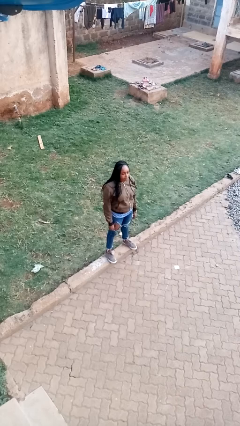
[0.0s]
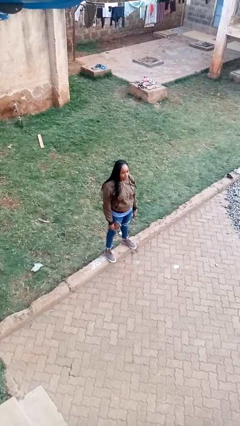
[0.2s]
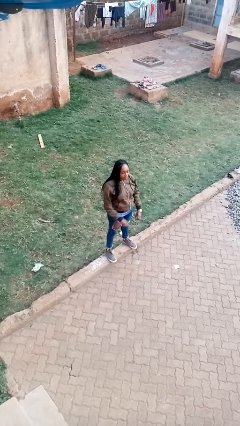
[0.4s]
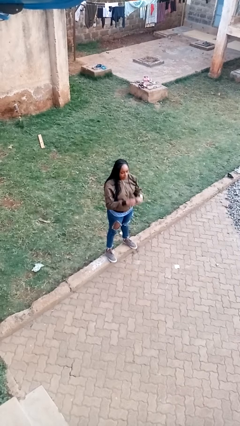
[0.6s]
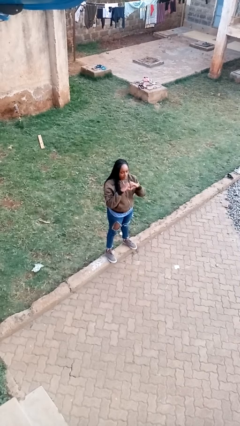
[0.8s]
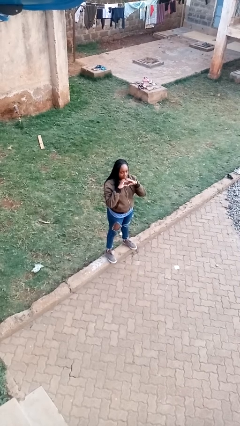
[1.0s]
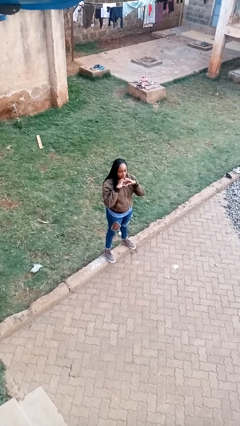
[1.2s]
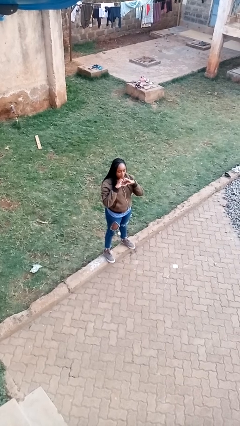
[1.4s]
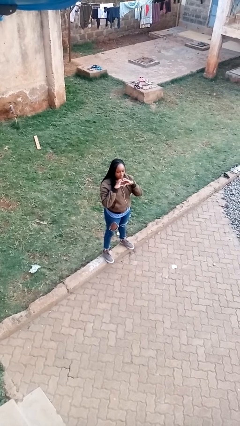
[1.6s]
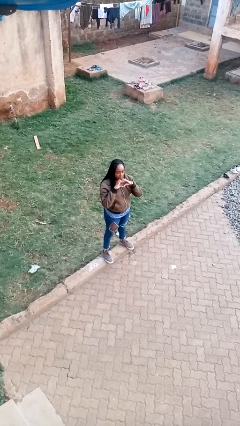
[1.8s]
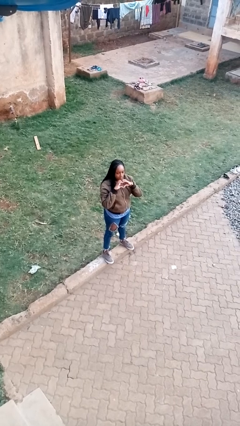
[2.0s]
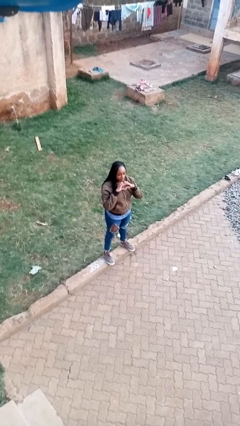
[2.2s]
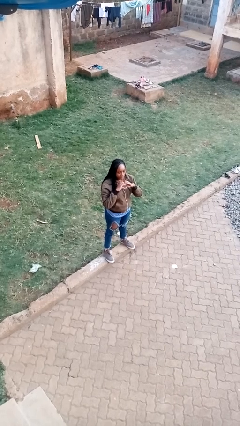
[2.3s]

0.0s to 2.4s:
person gestures heart

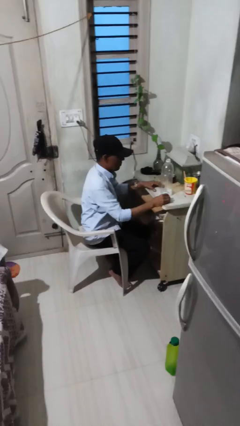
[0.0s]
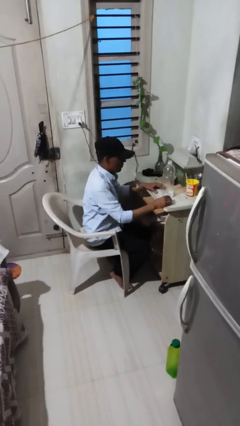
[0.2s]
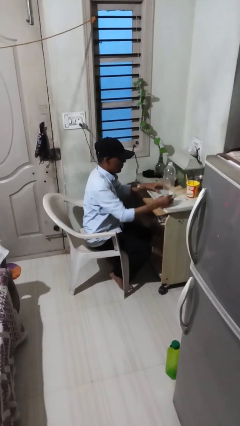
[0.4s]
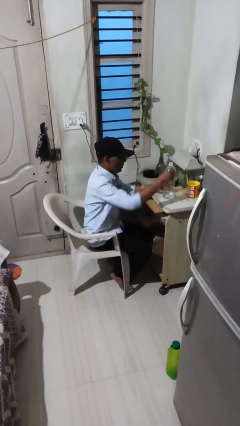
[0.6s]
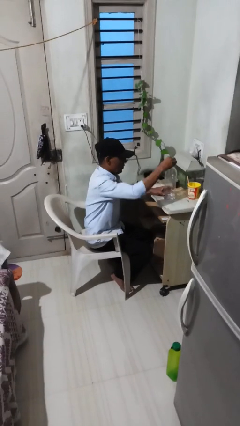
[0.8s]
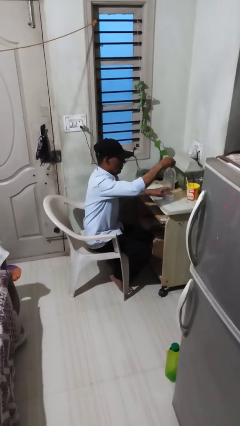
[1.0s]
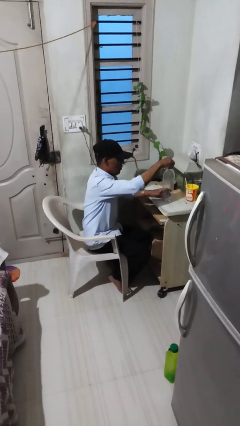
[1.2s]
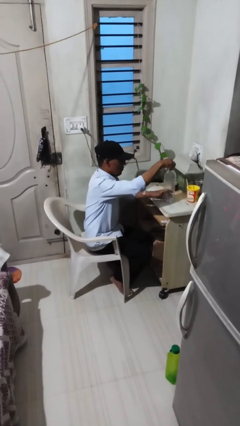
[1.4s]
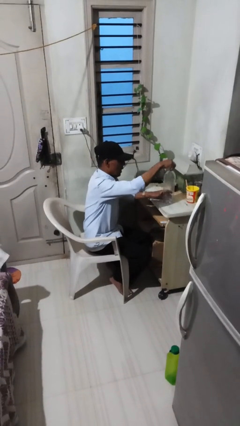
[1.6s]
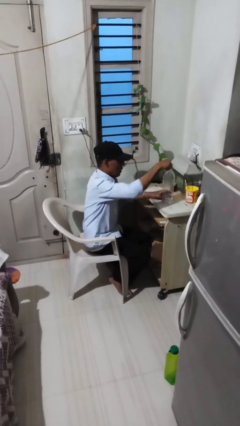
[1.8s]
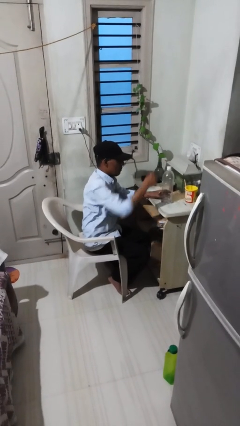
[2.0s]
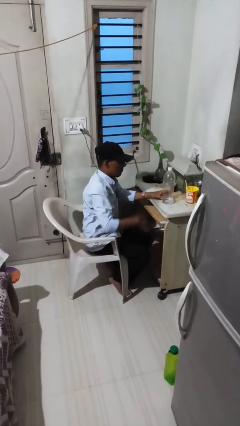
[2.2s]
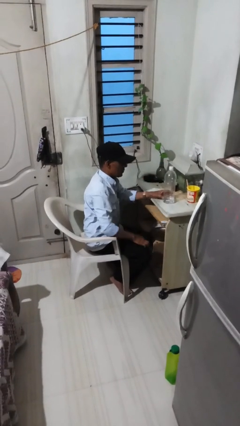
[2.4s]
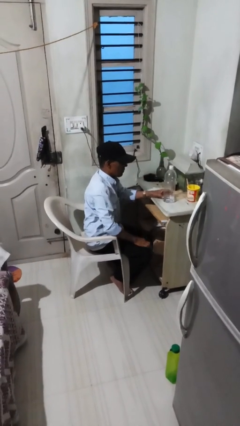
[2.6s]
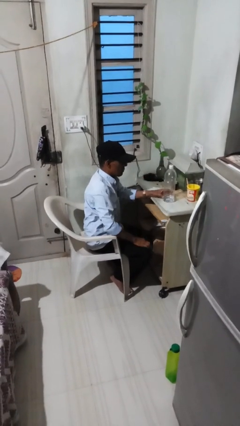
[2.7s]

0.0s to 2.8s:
person screws lid to bottle

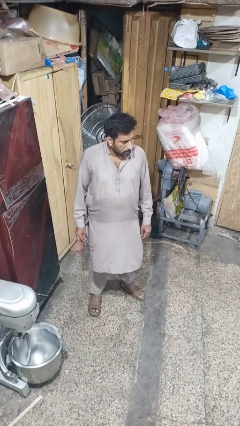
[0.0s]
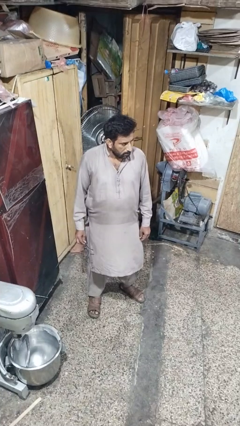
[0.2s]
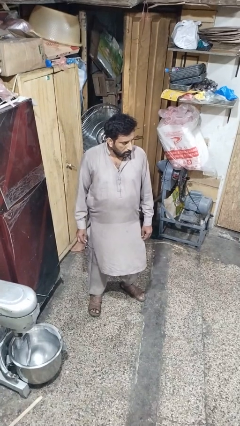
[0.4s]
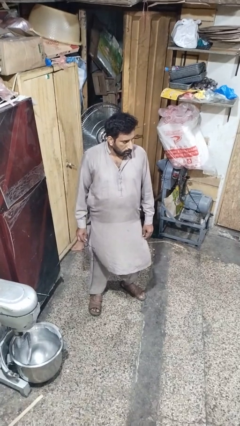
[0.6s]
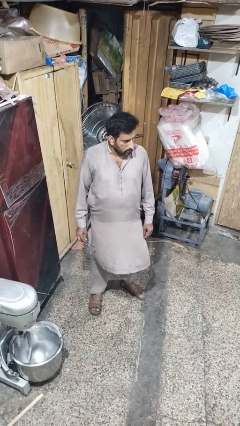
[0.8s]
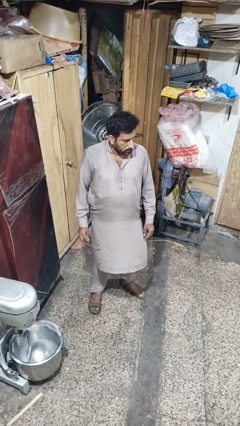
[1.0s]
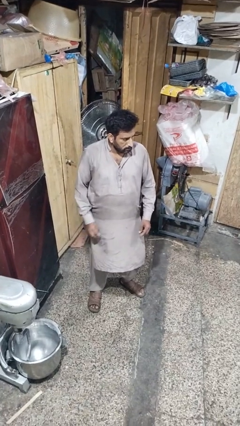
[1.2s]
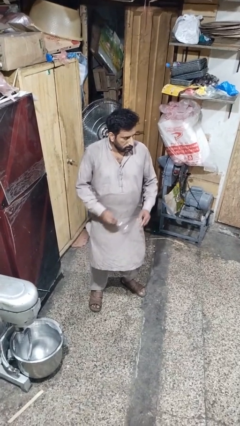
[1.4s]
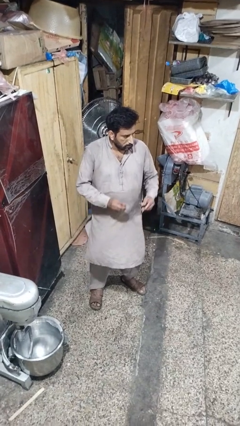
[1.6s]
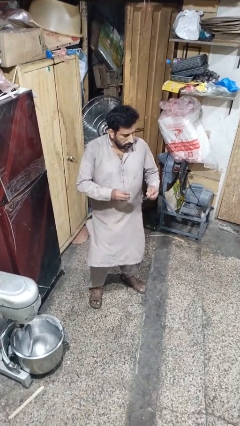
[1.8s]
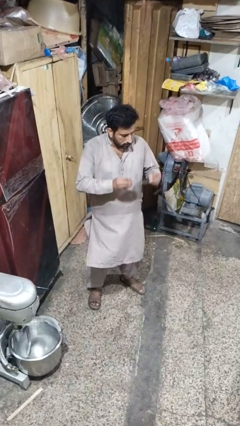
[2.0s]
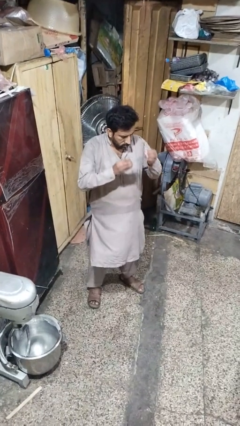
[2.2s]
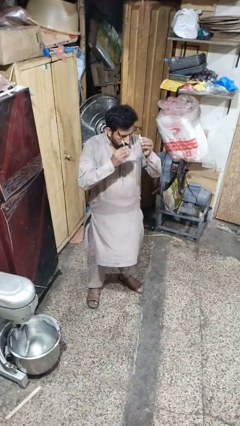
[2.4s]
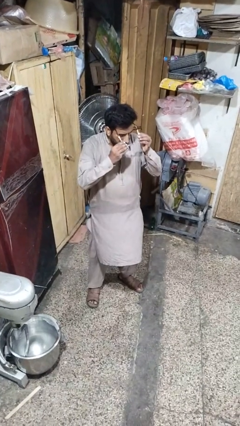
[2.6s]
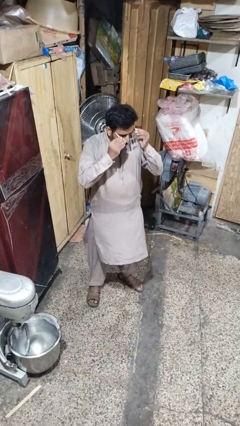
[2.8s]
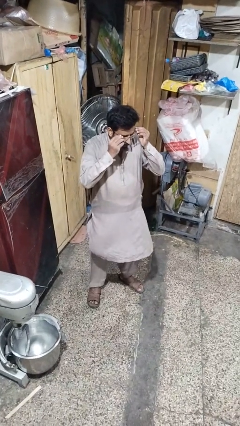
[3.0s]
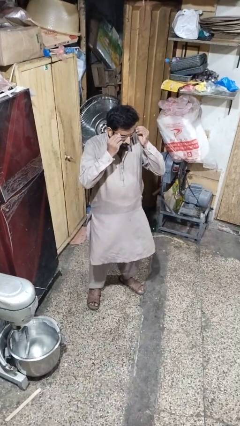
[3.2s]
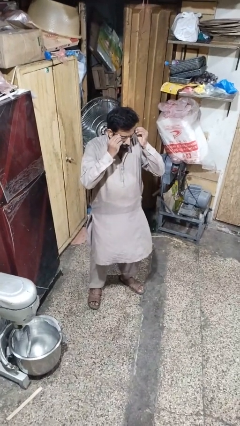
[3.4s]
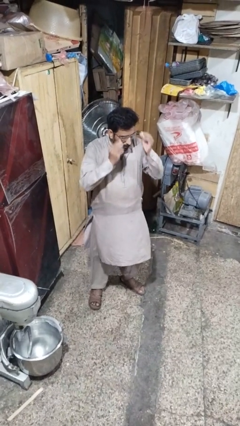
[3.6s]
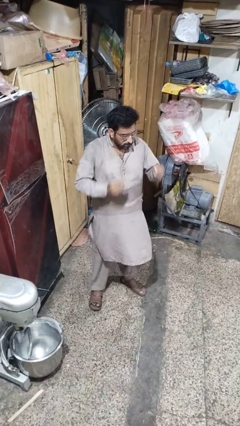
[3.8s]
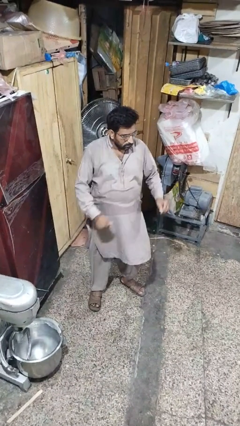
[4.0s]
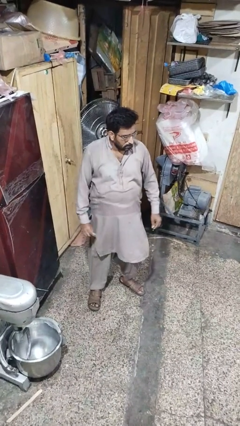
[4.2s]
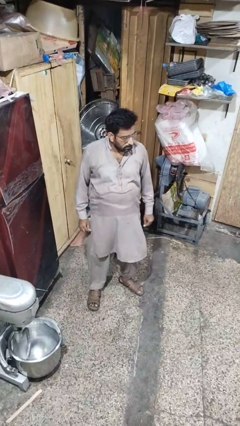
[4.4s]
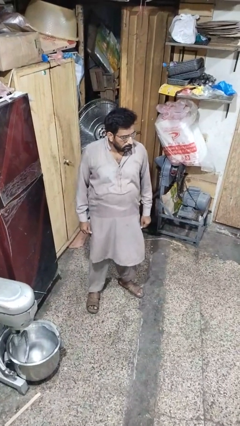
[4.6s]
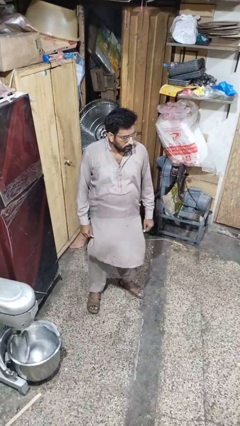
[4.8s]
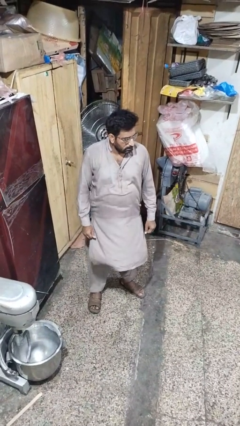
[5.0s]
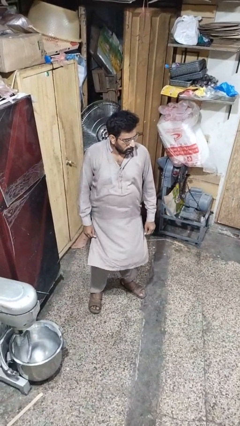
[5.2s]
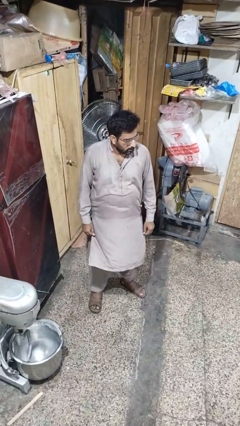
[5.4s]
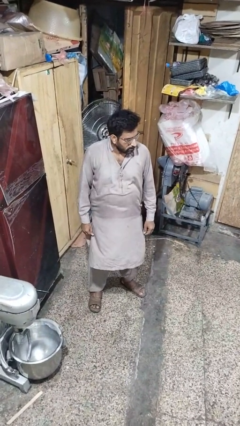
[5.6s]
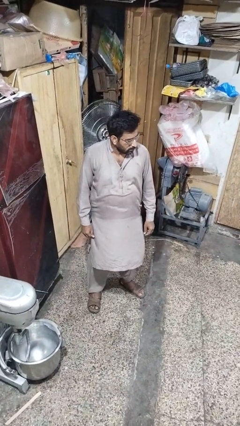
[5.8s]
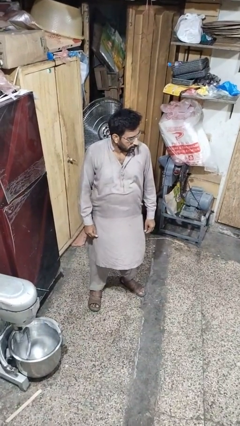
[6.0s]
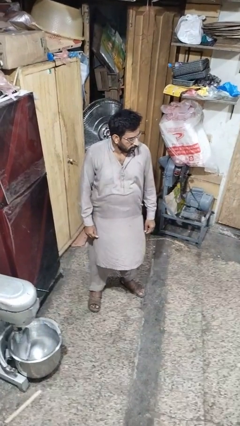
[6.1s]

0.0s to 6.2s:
person puts on glasses

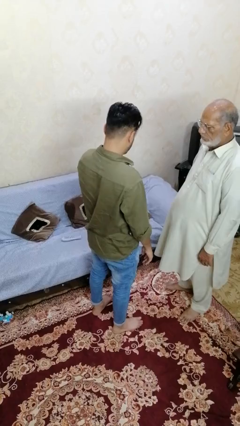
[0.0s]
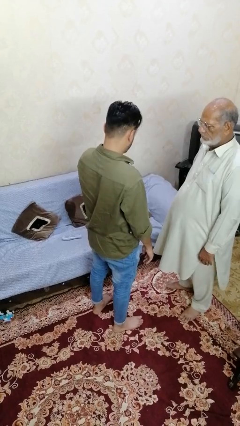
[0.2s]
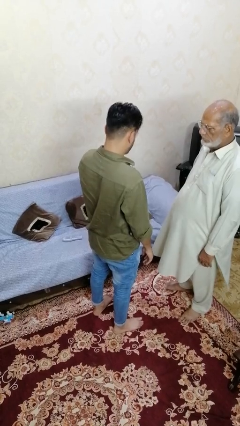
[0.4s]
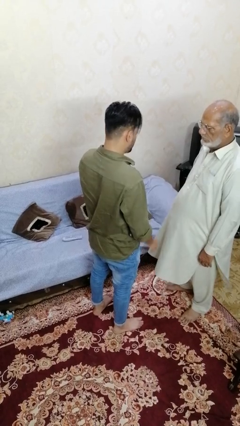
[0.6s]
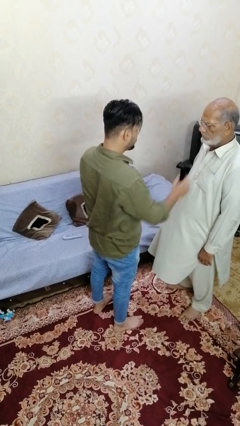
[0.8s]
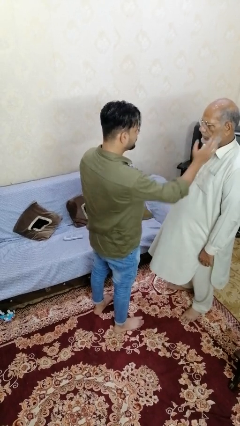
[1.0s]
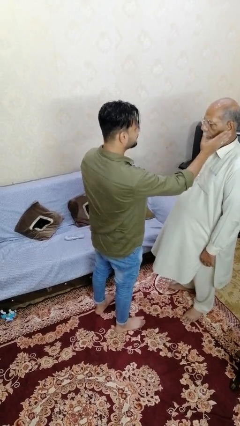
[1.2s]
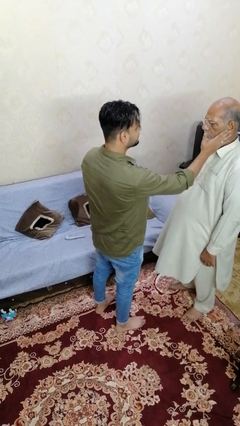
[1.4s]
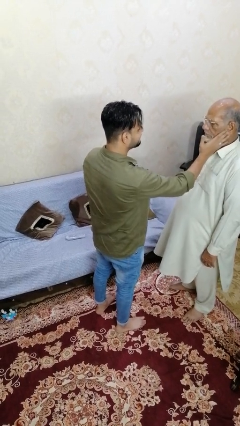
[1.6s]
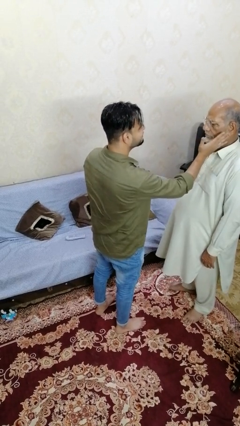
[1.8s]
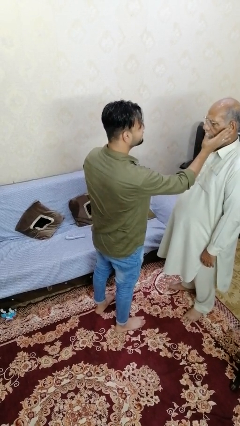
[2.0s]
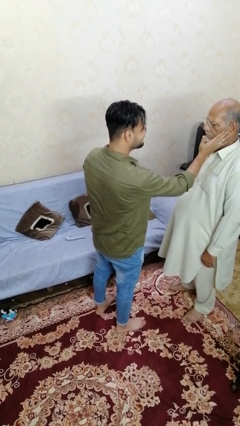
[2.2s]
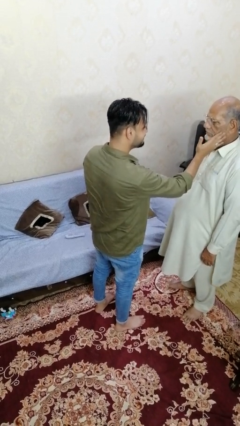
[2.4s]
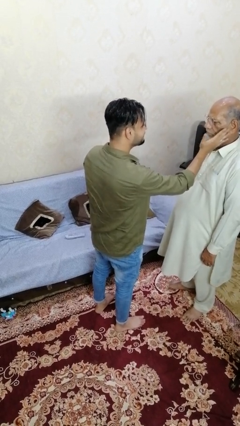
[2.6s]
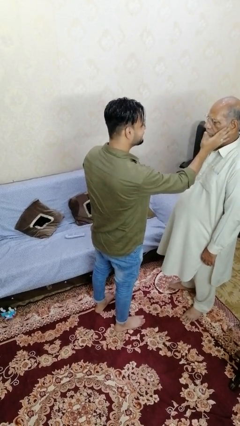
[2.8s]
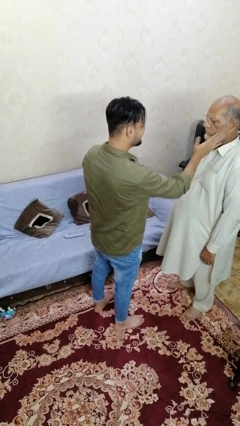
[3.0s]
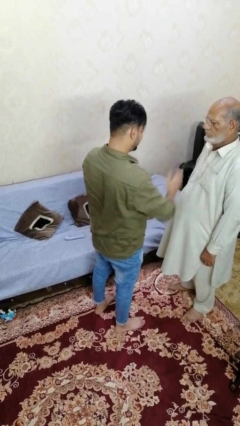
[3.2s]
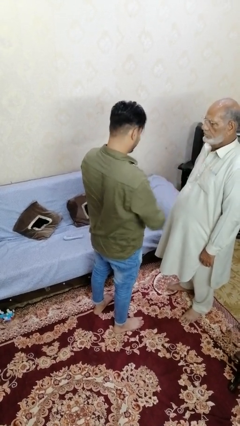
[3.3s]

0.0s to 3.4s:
person touches face of person

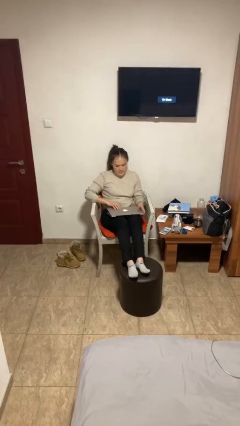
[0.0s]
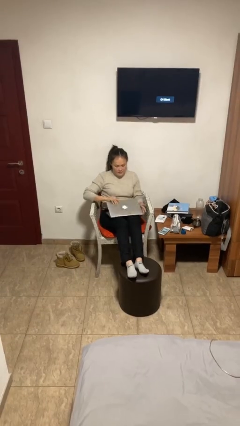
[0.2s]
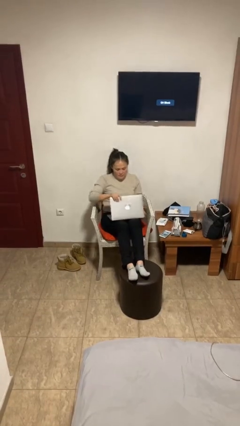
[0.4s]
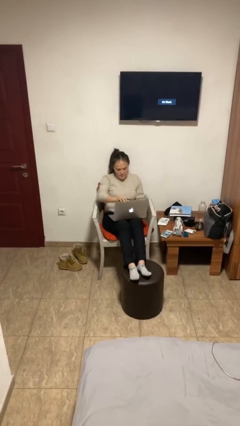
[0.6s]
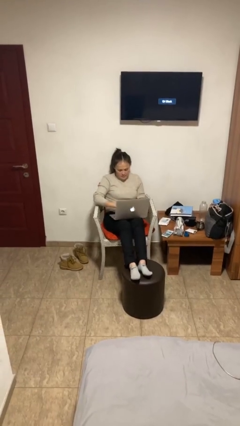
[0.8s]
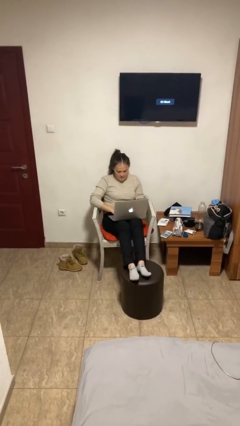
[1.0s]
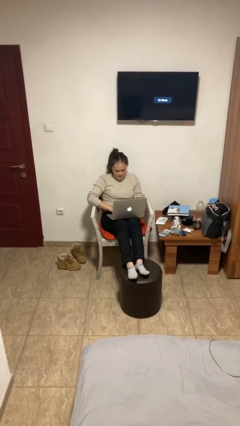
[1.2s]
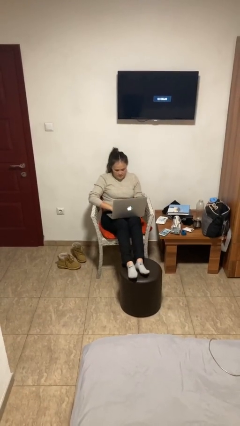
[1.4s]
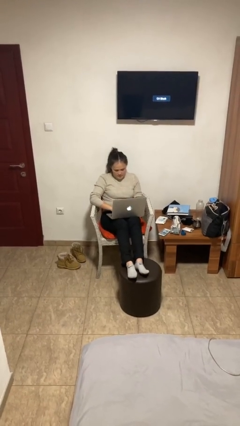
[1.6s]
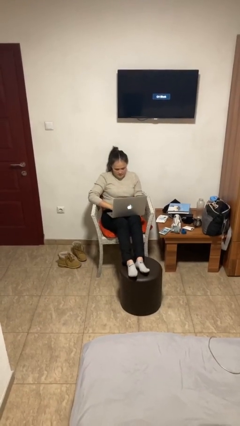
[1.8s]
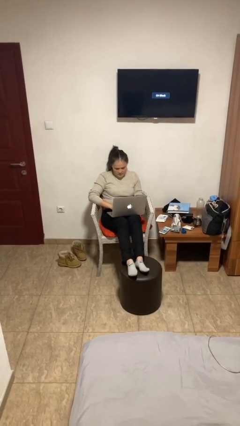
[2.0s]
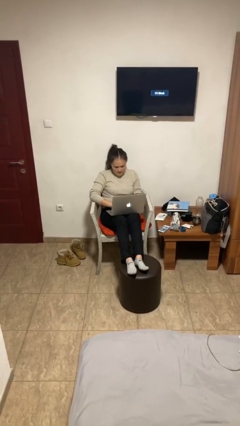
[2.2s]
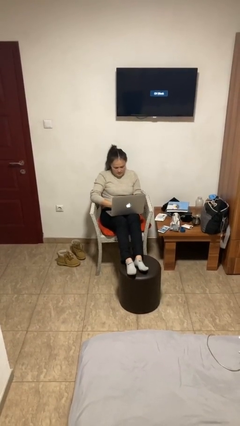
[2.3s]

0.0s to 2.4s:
person interacts with laptop

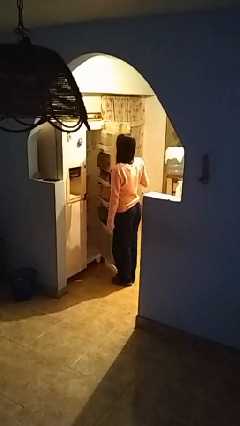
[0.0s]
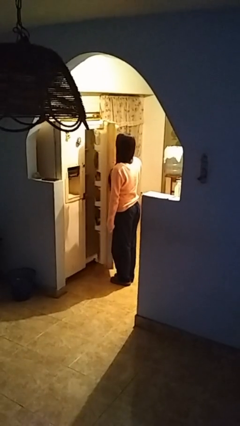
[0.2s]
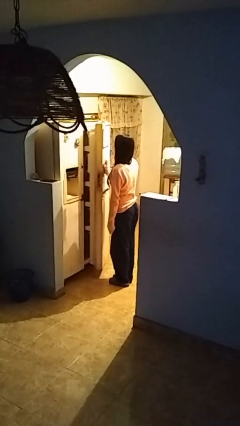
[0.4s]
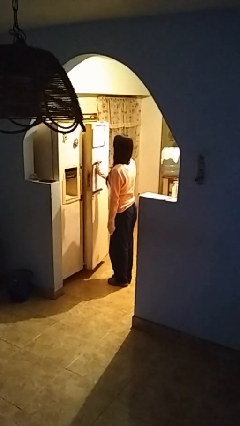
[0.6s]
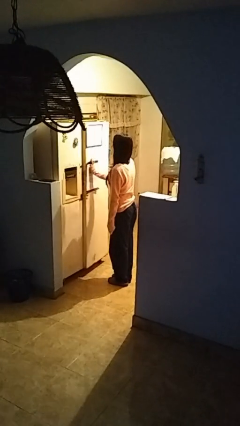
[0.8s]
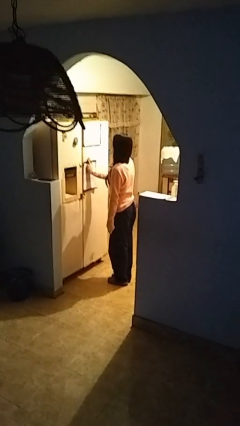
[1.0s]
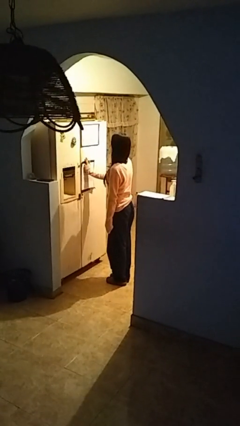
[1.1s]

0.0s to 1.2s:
person closes refrigerator
